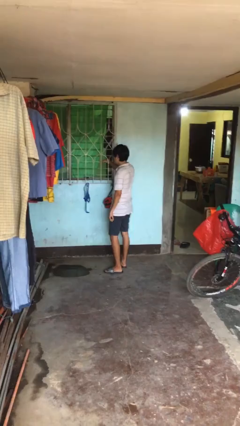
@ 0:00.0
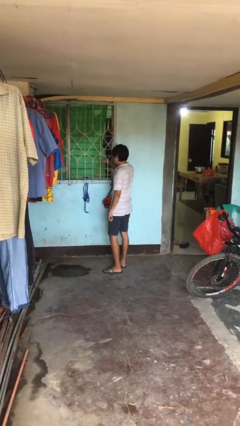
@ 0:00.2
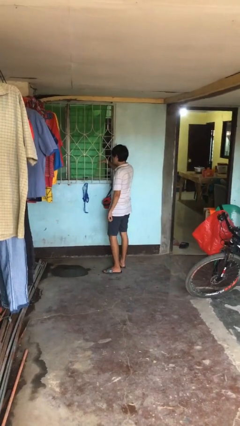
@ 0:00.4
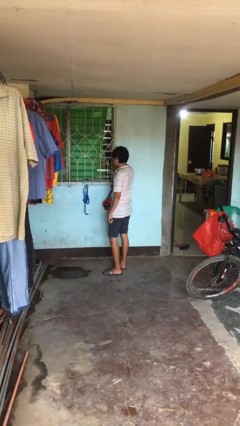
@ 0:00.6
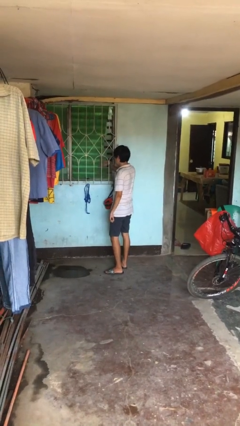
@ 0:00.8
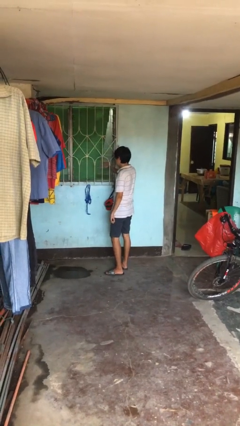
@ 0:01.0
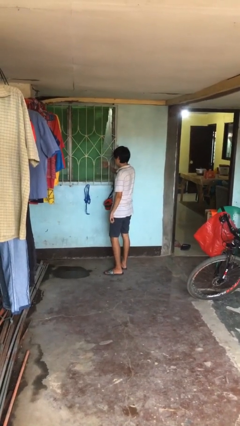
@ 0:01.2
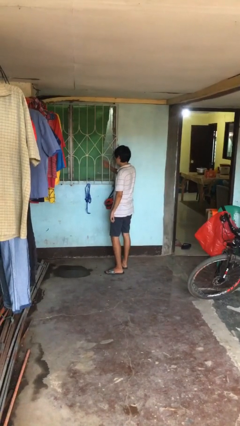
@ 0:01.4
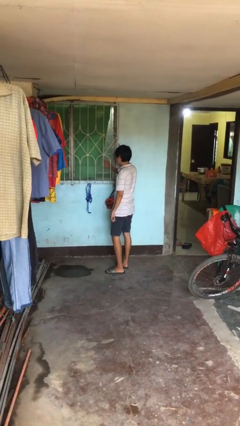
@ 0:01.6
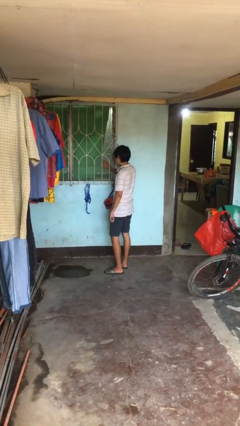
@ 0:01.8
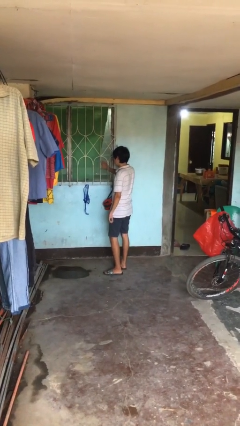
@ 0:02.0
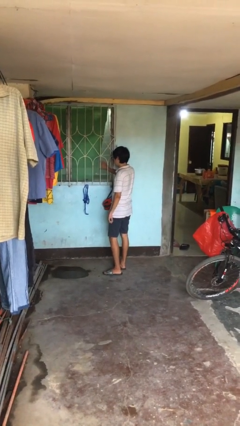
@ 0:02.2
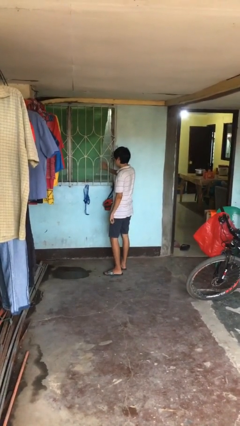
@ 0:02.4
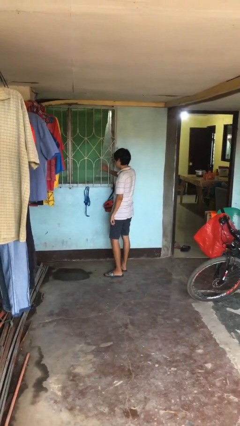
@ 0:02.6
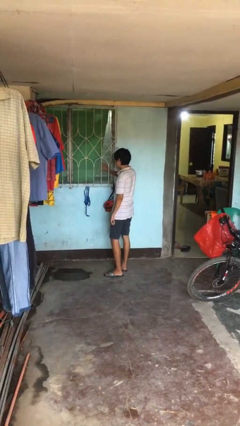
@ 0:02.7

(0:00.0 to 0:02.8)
person closes home window

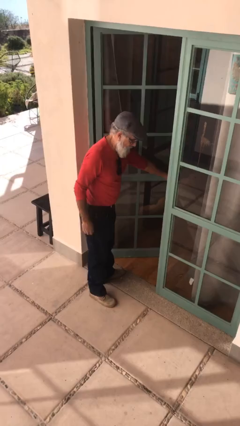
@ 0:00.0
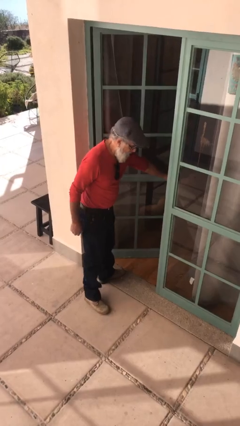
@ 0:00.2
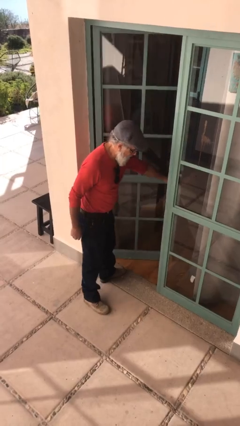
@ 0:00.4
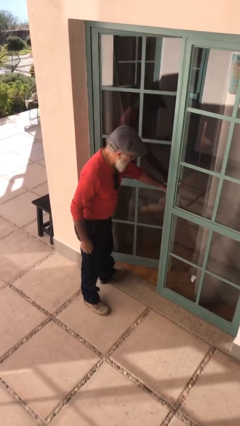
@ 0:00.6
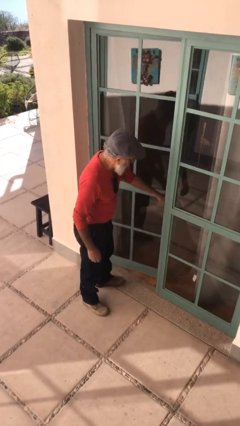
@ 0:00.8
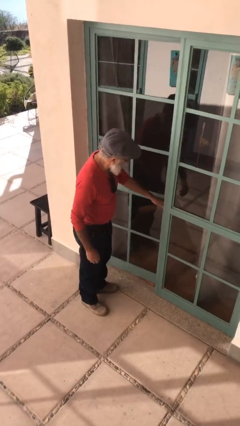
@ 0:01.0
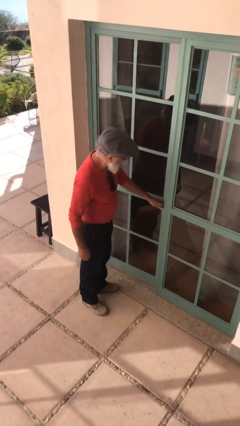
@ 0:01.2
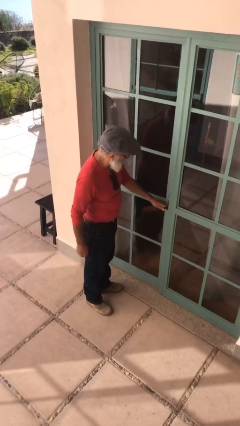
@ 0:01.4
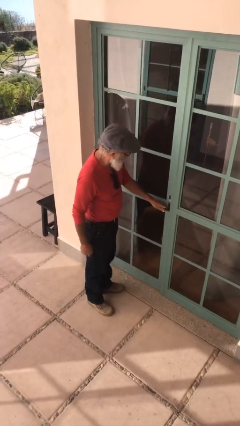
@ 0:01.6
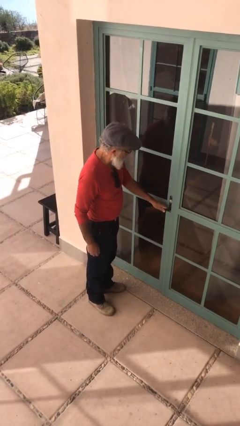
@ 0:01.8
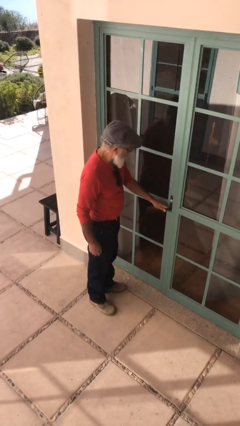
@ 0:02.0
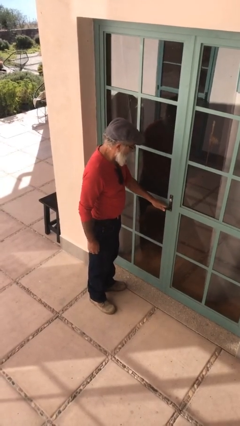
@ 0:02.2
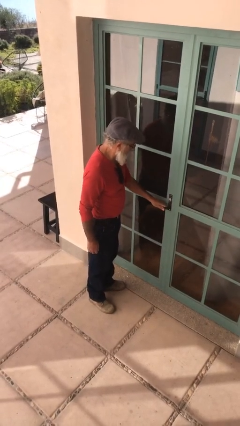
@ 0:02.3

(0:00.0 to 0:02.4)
person closes facility door

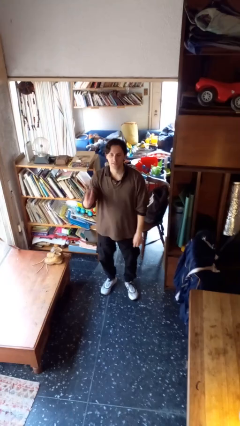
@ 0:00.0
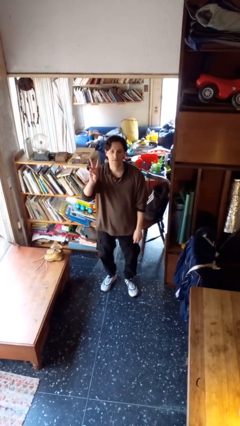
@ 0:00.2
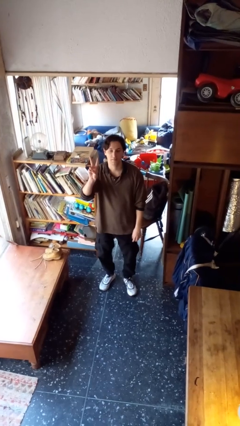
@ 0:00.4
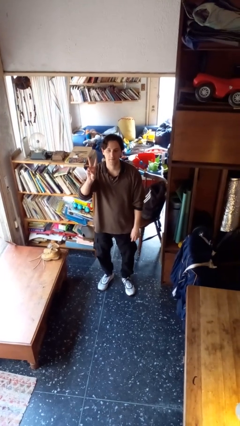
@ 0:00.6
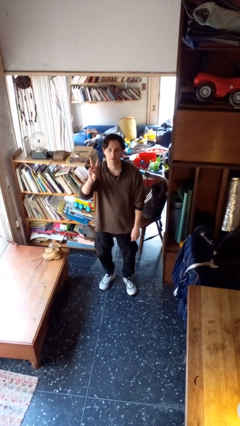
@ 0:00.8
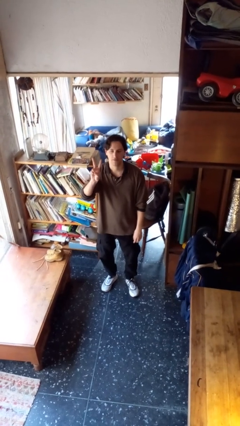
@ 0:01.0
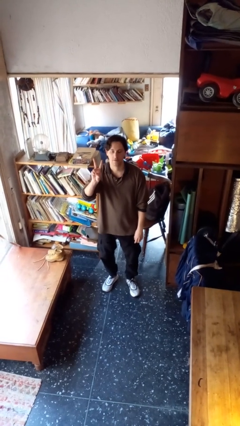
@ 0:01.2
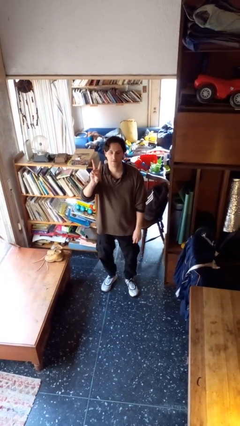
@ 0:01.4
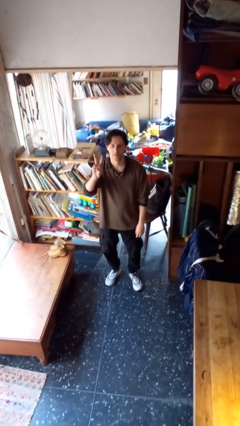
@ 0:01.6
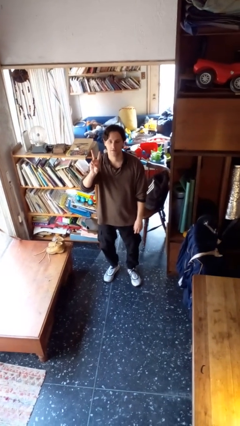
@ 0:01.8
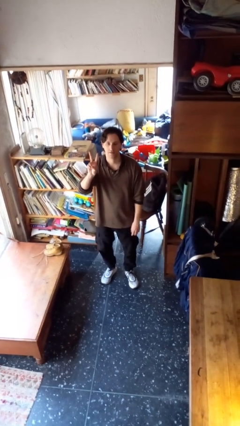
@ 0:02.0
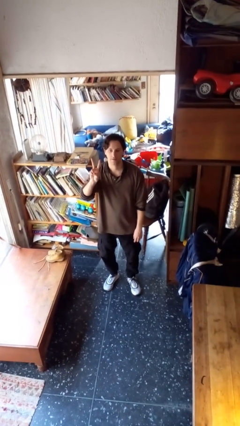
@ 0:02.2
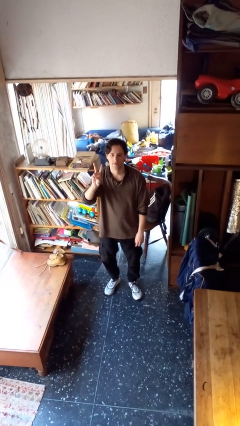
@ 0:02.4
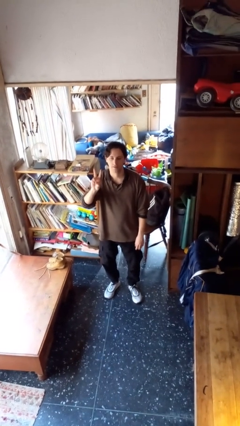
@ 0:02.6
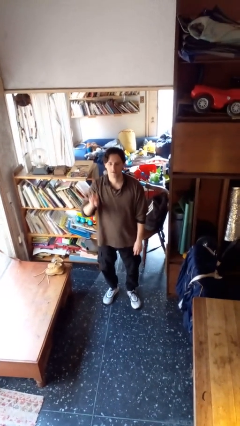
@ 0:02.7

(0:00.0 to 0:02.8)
person gestures peace

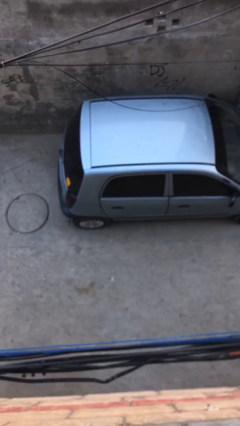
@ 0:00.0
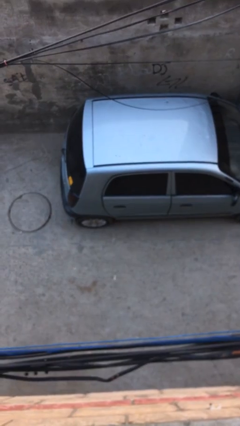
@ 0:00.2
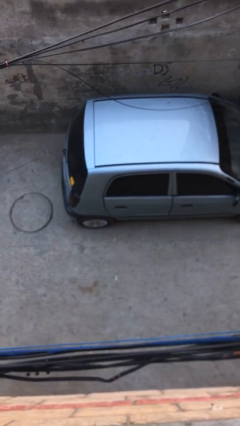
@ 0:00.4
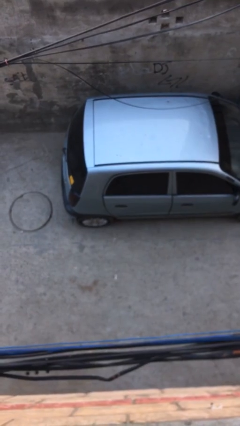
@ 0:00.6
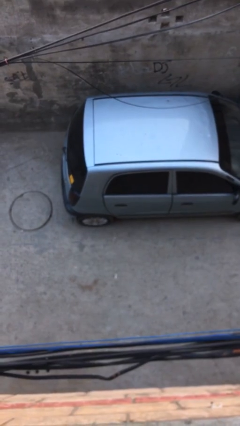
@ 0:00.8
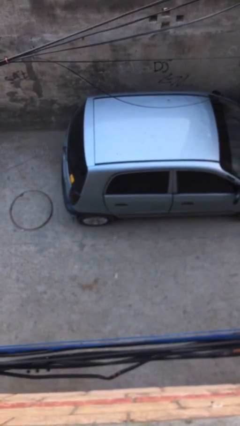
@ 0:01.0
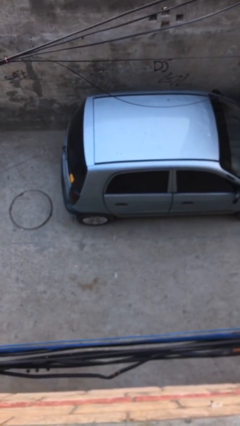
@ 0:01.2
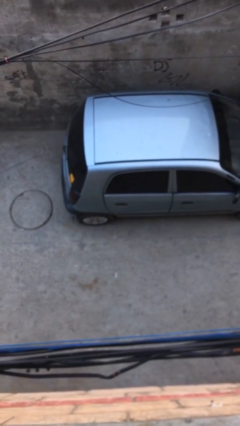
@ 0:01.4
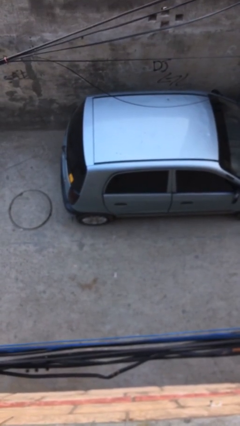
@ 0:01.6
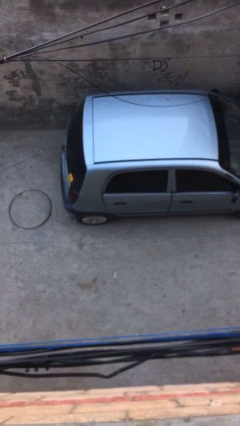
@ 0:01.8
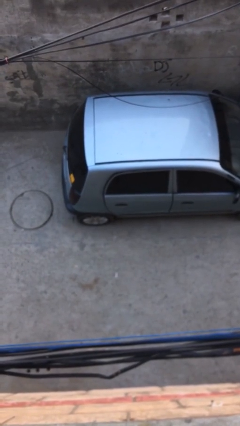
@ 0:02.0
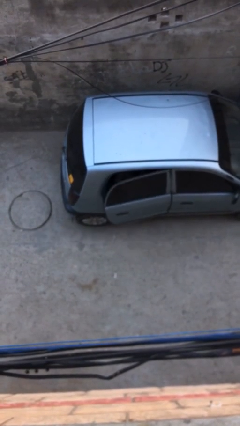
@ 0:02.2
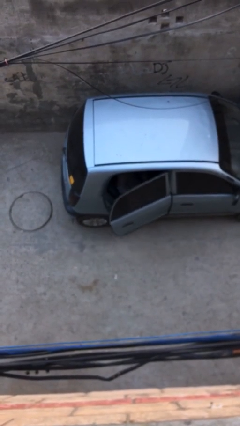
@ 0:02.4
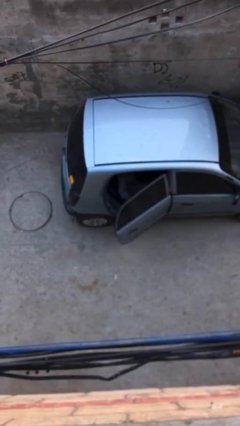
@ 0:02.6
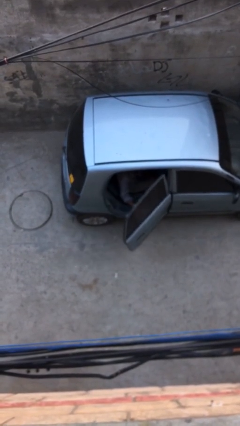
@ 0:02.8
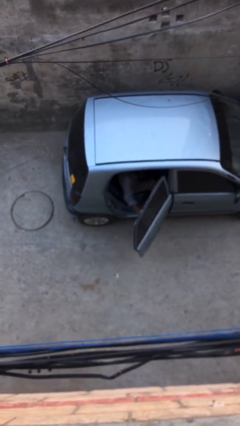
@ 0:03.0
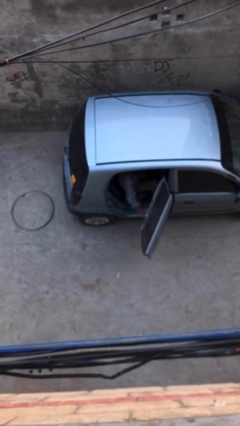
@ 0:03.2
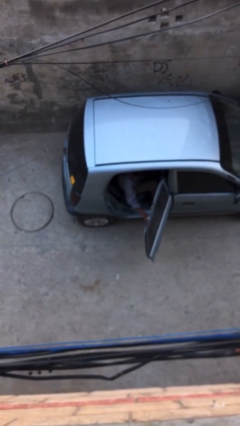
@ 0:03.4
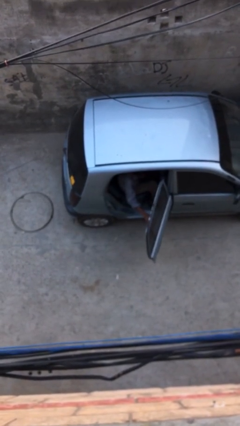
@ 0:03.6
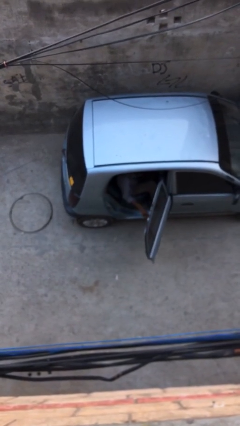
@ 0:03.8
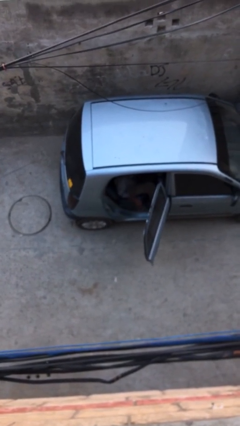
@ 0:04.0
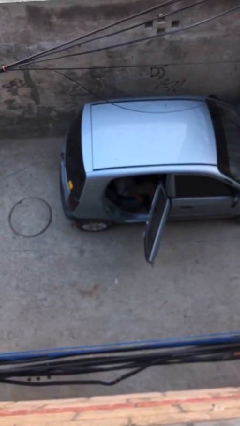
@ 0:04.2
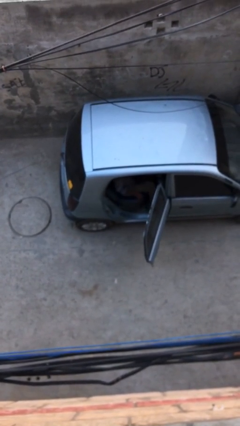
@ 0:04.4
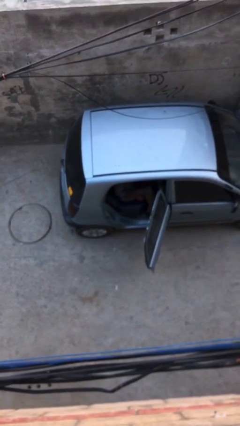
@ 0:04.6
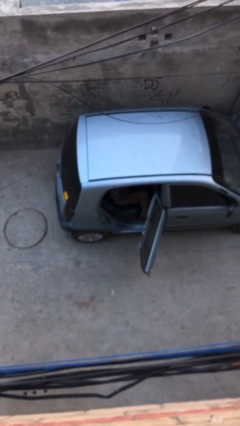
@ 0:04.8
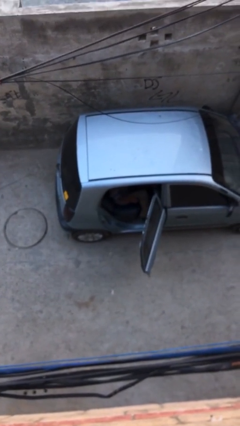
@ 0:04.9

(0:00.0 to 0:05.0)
person opens car door

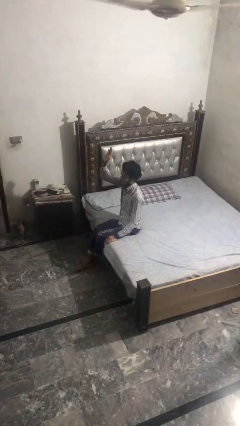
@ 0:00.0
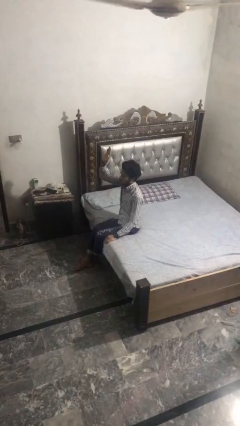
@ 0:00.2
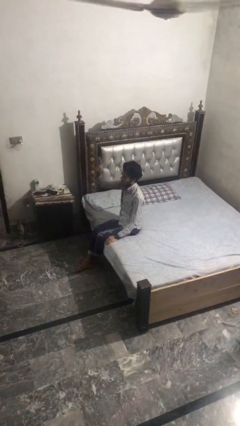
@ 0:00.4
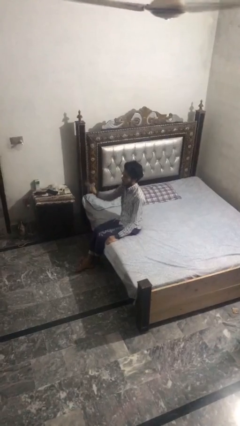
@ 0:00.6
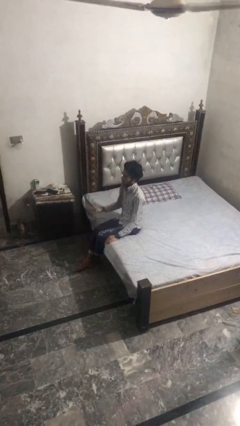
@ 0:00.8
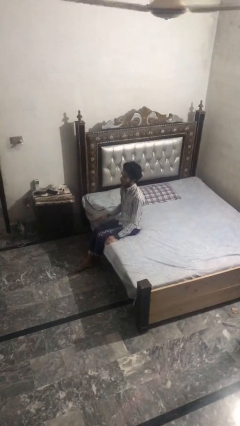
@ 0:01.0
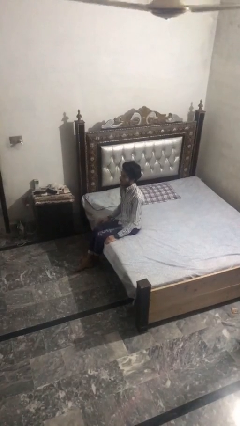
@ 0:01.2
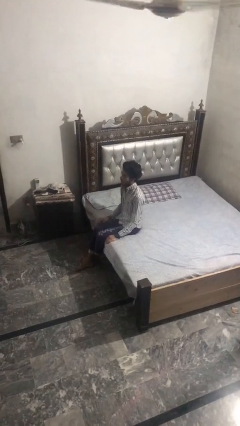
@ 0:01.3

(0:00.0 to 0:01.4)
person gestures lower hand

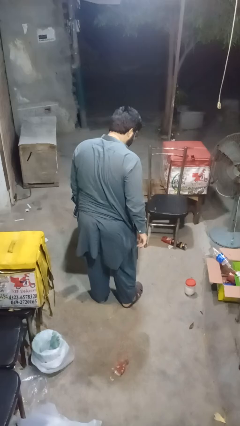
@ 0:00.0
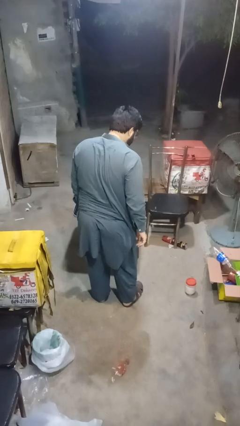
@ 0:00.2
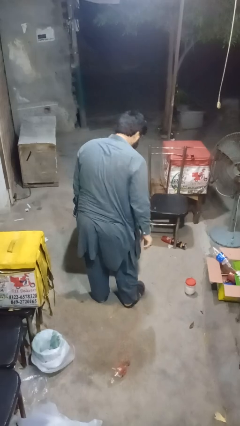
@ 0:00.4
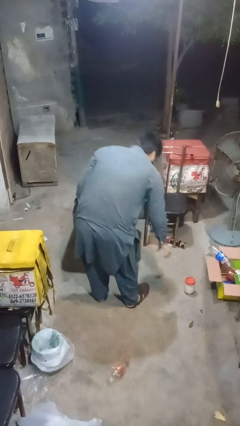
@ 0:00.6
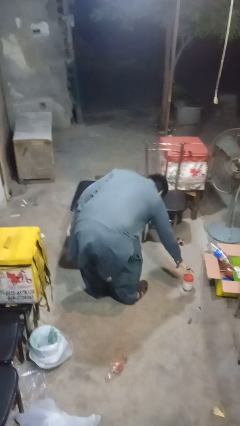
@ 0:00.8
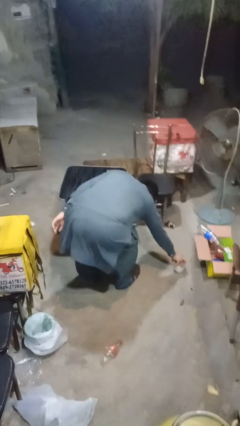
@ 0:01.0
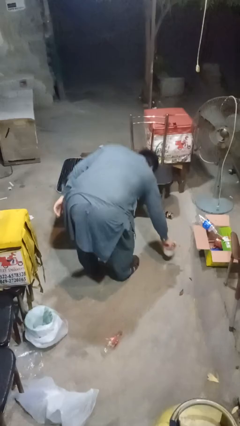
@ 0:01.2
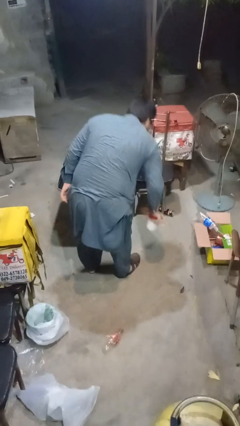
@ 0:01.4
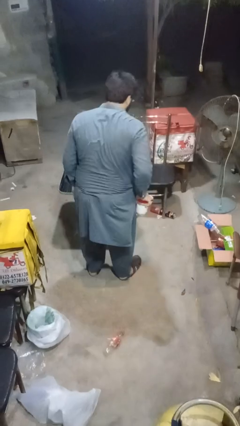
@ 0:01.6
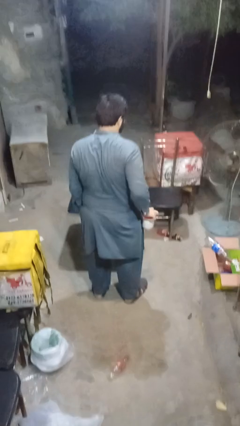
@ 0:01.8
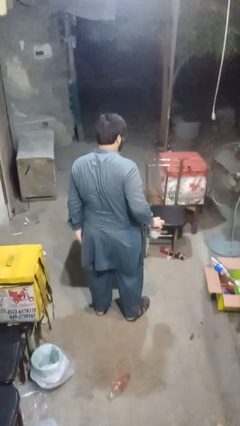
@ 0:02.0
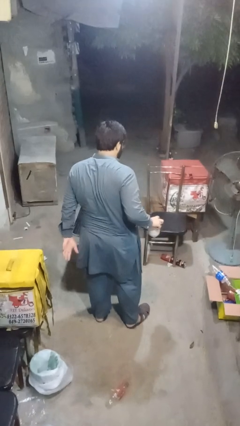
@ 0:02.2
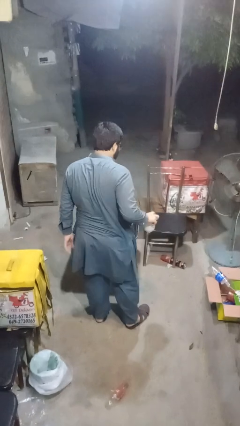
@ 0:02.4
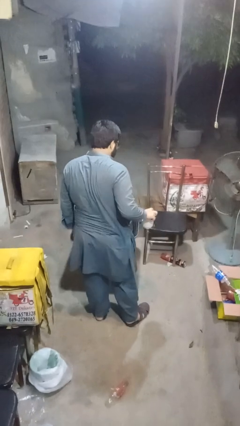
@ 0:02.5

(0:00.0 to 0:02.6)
person picks up object from floor

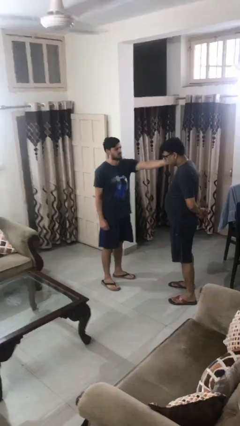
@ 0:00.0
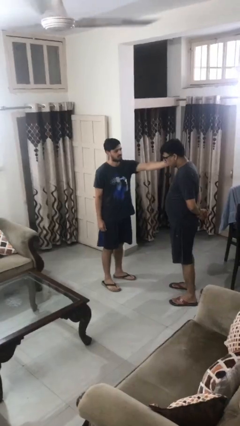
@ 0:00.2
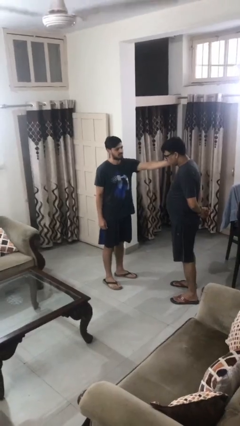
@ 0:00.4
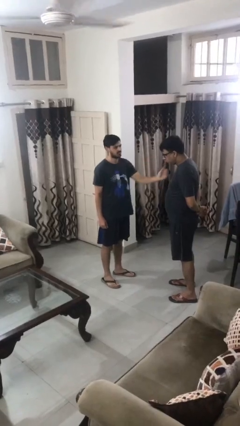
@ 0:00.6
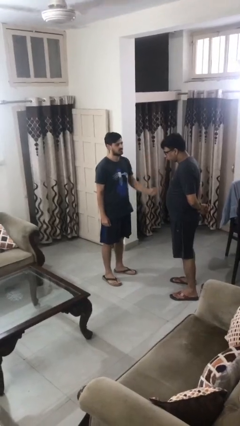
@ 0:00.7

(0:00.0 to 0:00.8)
person touches face of person
